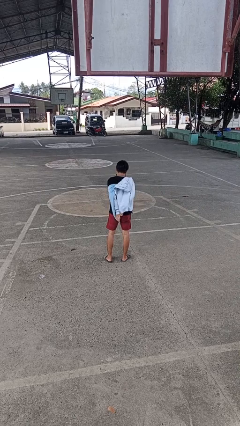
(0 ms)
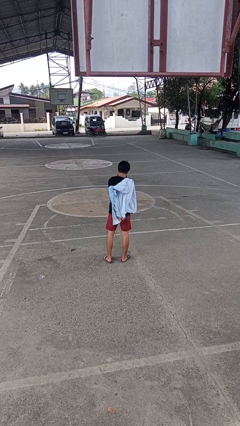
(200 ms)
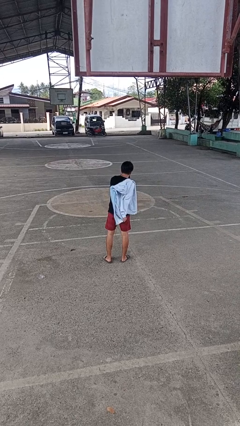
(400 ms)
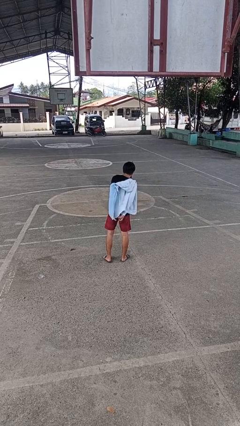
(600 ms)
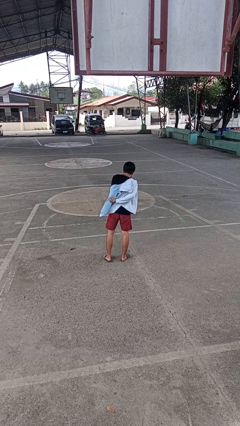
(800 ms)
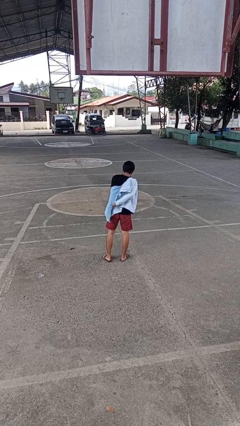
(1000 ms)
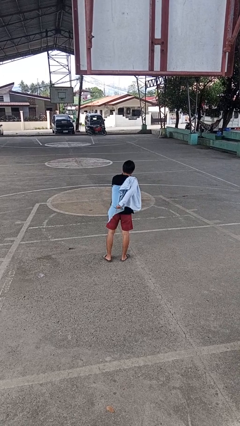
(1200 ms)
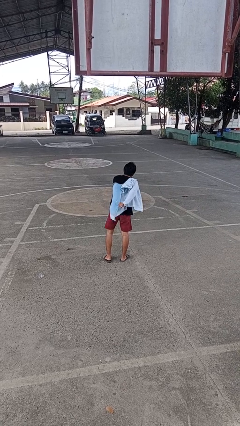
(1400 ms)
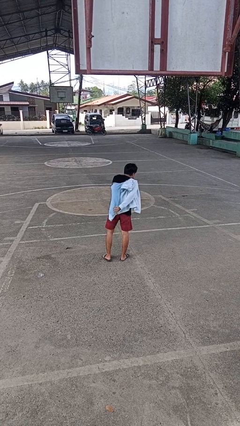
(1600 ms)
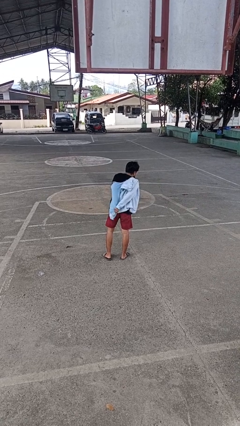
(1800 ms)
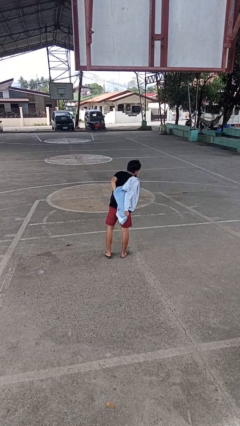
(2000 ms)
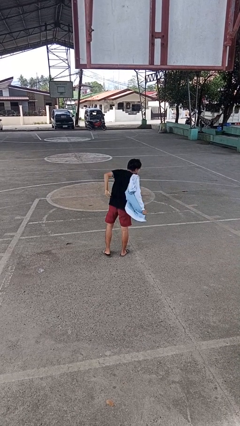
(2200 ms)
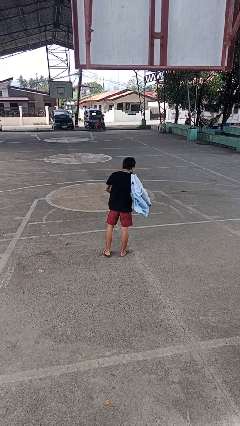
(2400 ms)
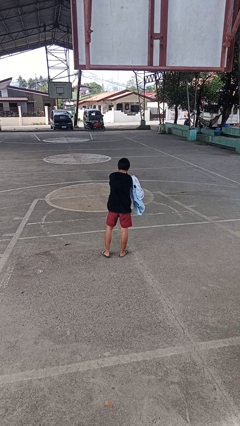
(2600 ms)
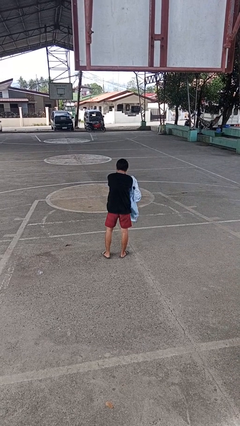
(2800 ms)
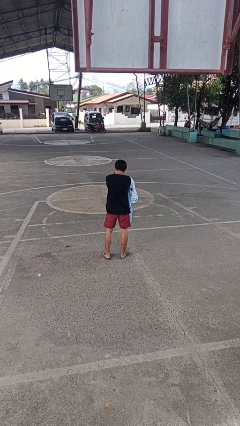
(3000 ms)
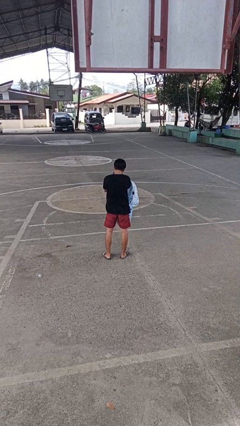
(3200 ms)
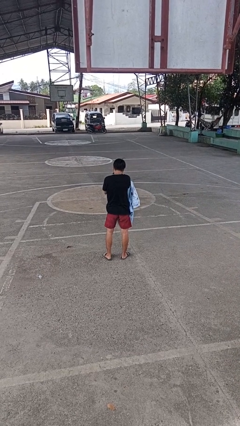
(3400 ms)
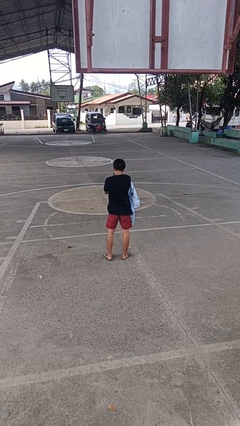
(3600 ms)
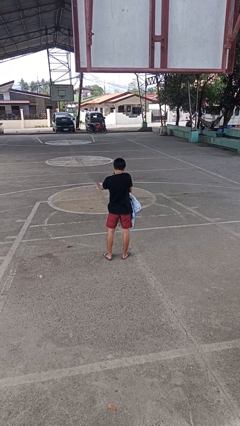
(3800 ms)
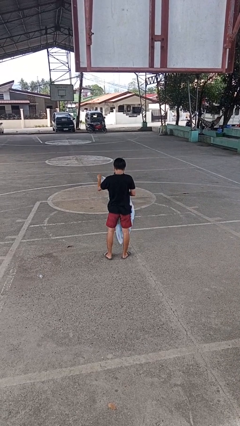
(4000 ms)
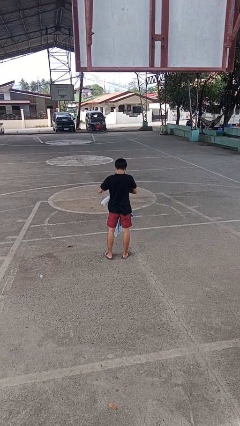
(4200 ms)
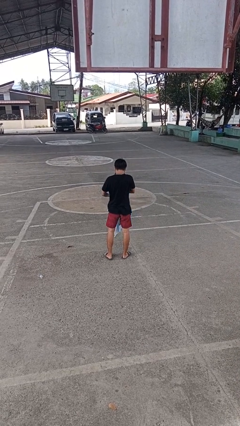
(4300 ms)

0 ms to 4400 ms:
person takes off jacket

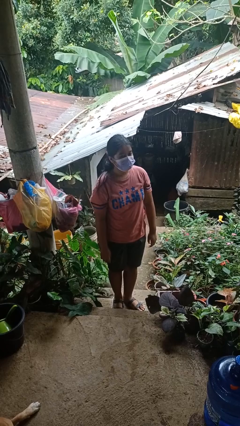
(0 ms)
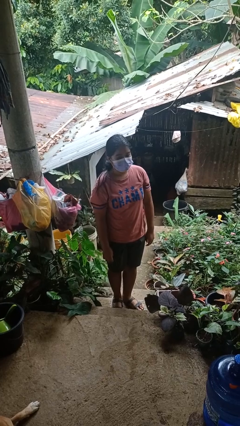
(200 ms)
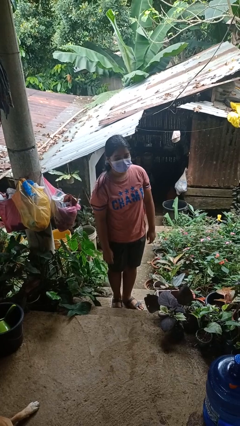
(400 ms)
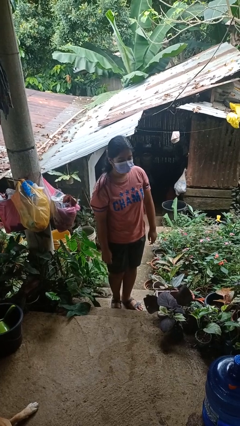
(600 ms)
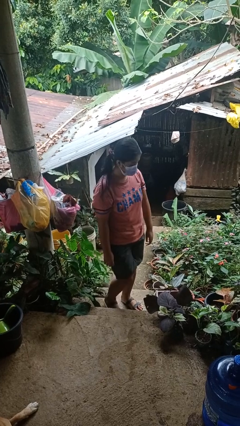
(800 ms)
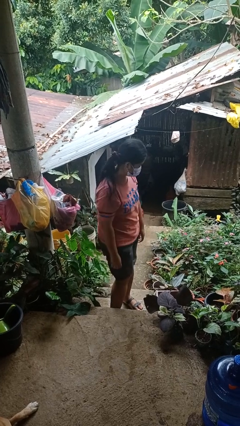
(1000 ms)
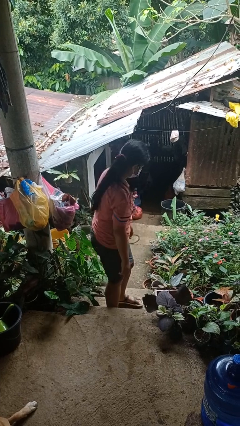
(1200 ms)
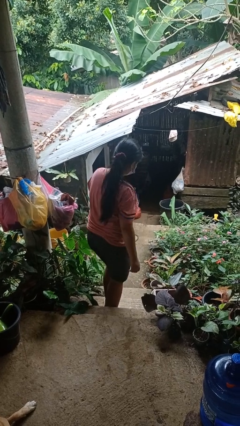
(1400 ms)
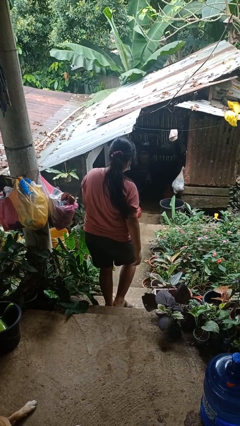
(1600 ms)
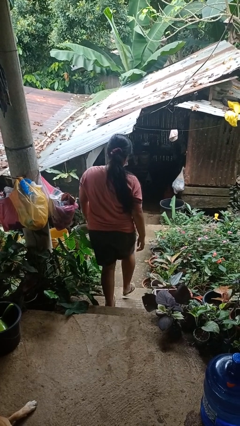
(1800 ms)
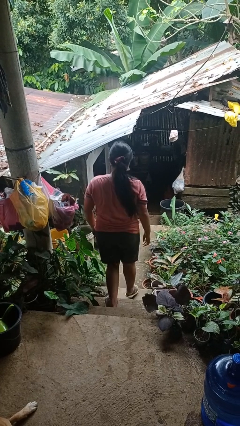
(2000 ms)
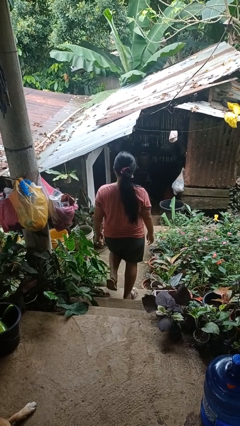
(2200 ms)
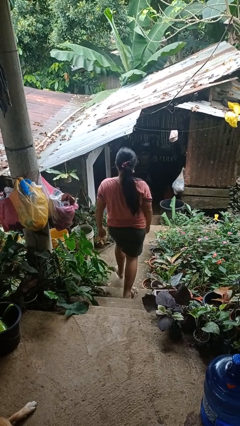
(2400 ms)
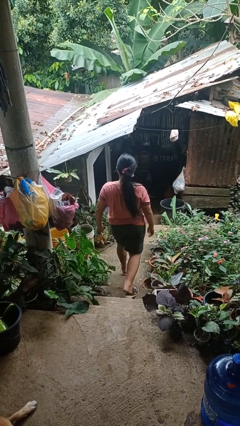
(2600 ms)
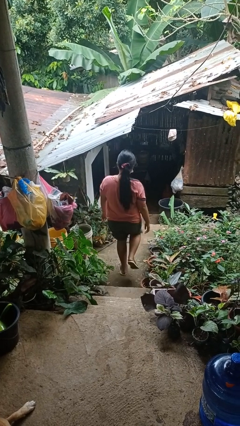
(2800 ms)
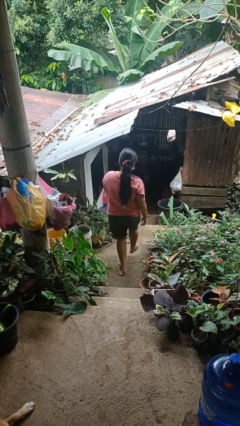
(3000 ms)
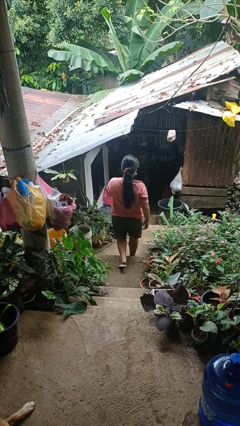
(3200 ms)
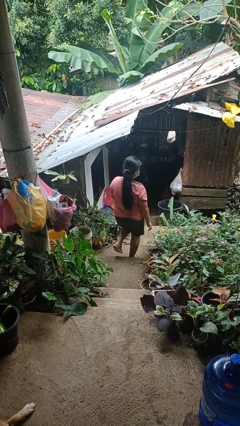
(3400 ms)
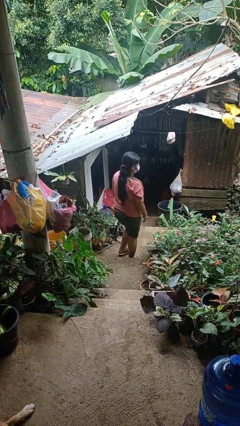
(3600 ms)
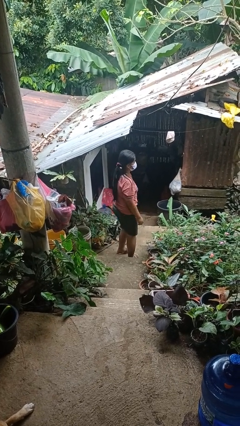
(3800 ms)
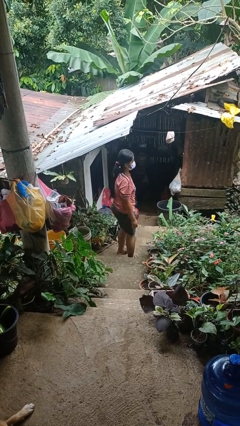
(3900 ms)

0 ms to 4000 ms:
person climbs down stairs

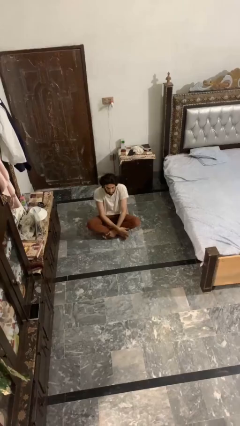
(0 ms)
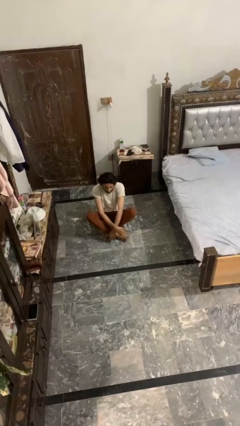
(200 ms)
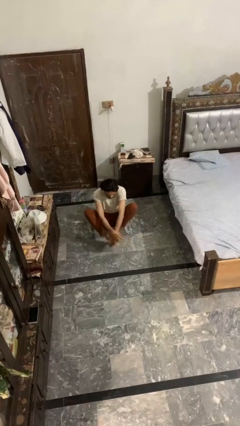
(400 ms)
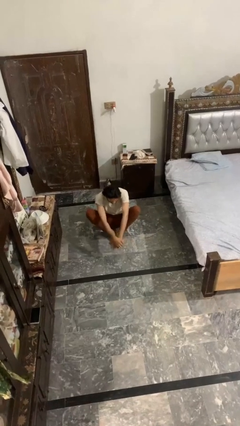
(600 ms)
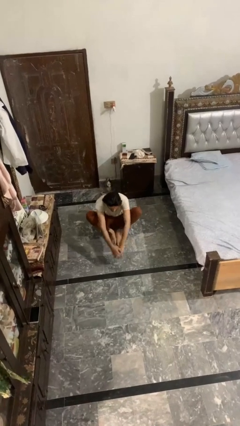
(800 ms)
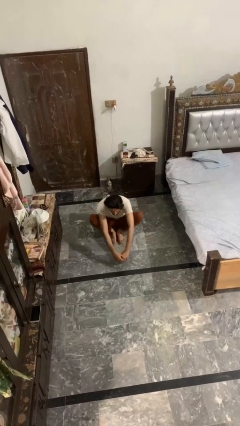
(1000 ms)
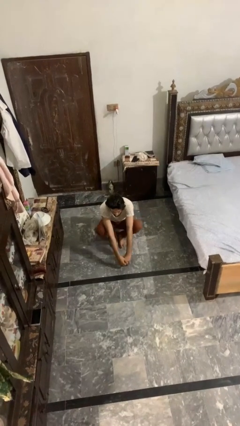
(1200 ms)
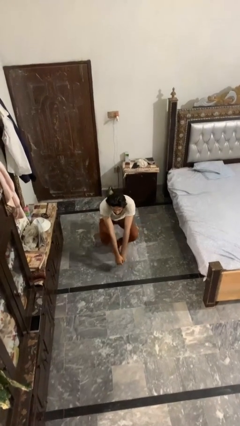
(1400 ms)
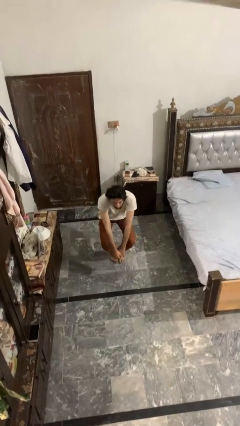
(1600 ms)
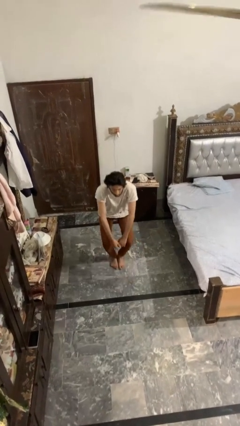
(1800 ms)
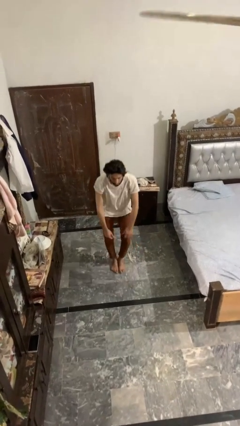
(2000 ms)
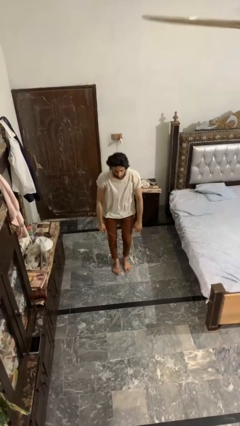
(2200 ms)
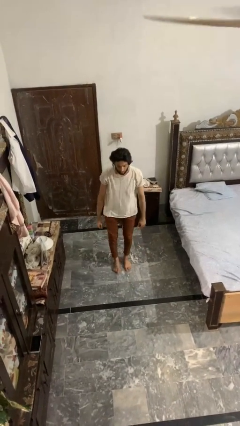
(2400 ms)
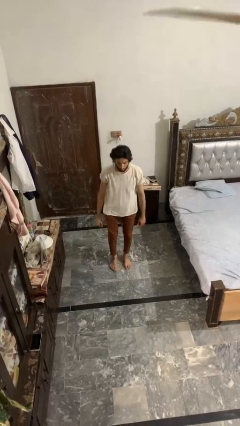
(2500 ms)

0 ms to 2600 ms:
person stands up from floor

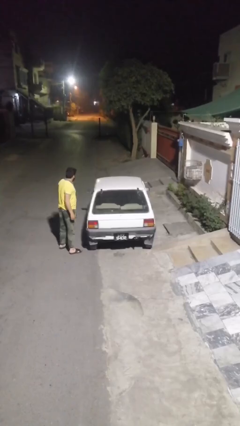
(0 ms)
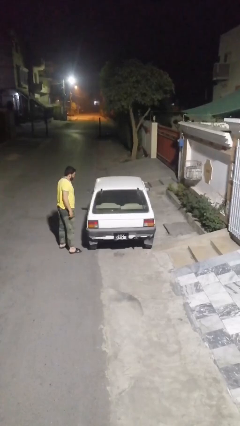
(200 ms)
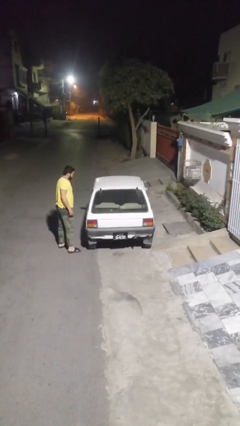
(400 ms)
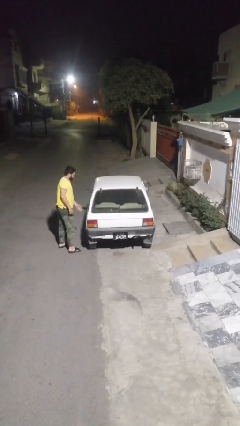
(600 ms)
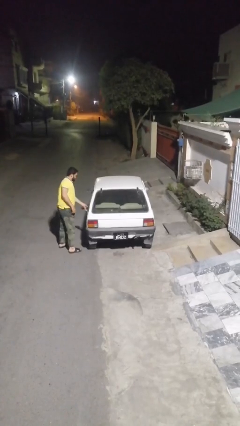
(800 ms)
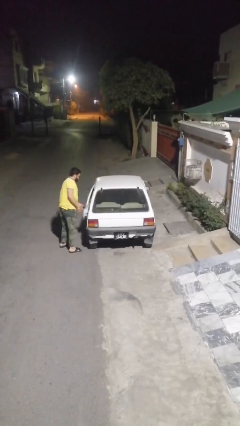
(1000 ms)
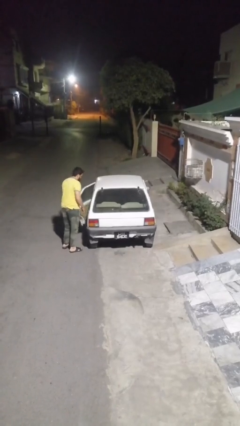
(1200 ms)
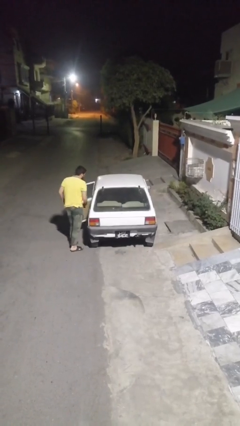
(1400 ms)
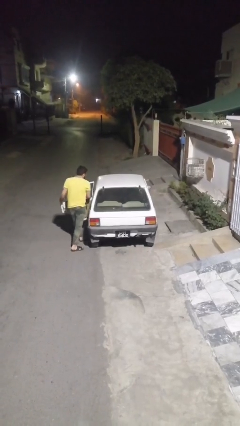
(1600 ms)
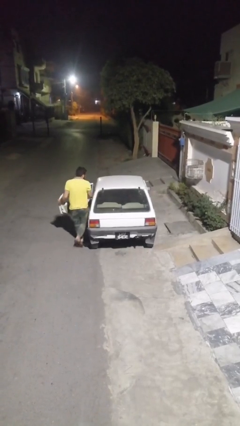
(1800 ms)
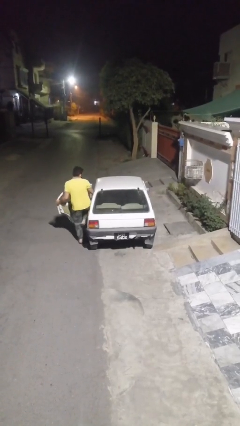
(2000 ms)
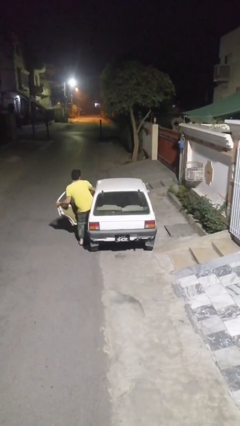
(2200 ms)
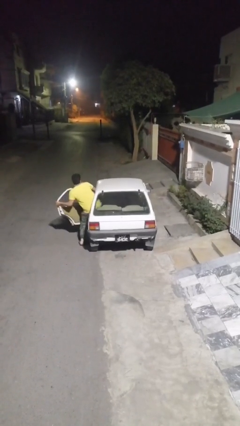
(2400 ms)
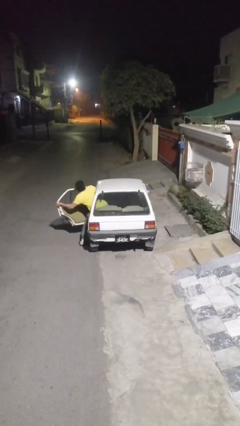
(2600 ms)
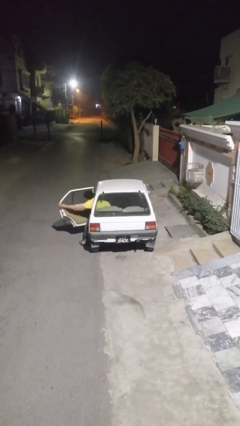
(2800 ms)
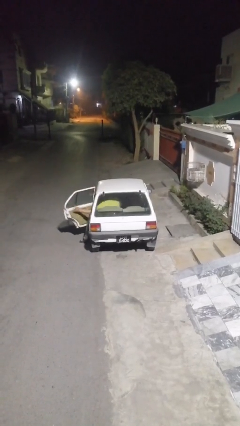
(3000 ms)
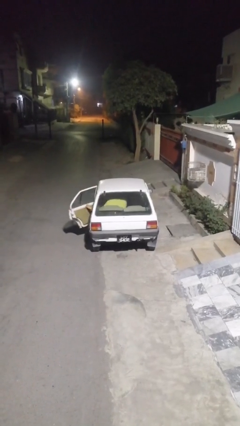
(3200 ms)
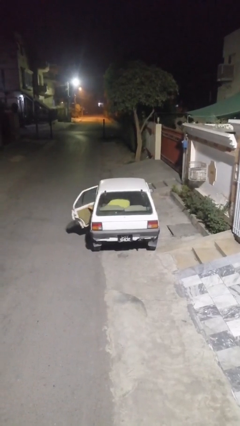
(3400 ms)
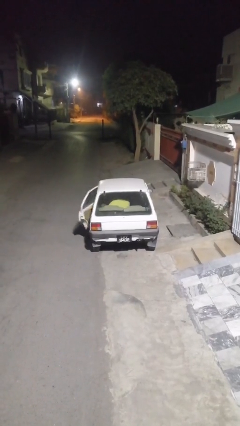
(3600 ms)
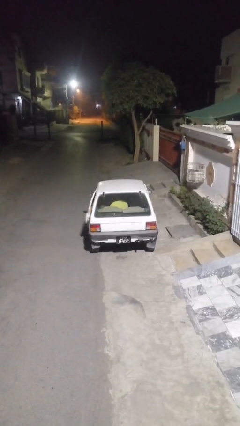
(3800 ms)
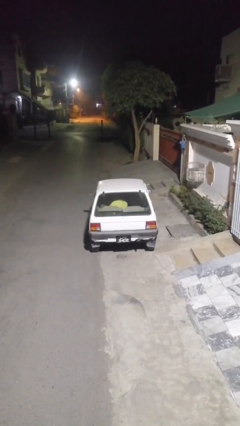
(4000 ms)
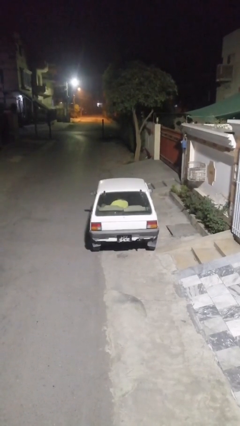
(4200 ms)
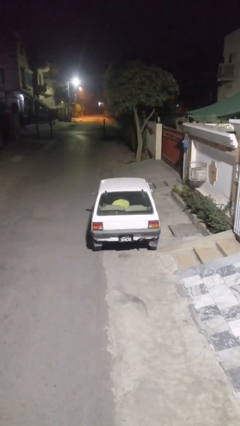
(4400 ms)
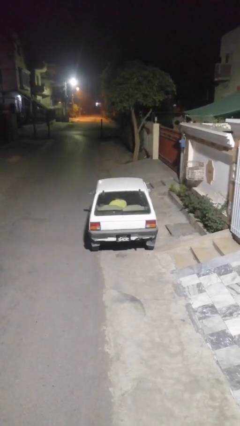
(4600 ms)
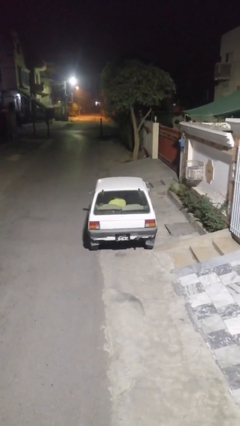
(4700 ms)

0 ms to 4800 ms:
car picks up person

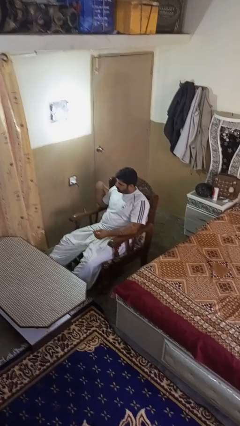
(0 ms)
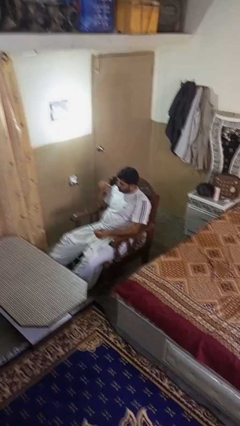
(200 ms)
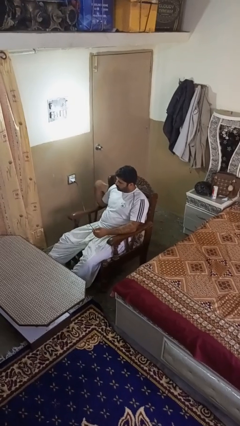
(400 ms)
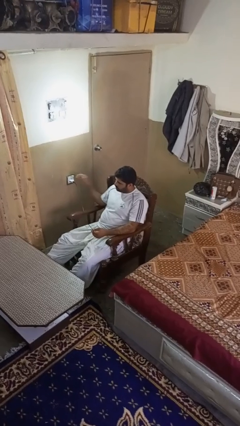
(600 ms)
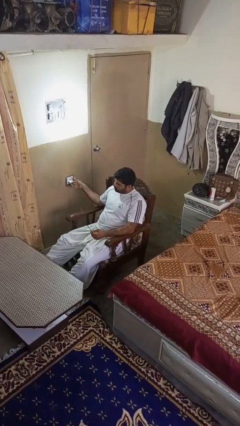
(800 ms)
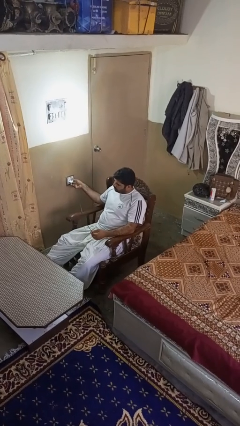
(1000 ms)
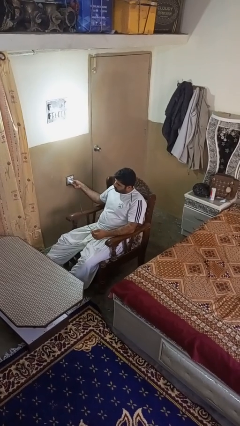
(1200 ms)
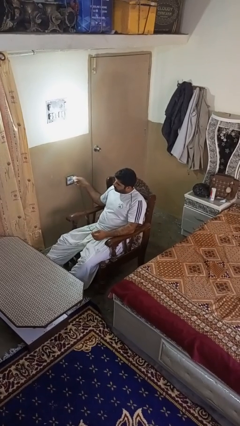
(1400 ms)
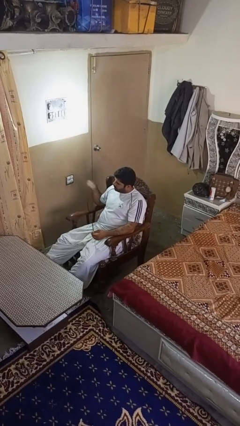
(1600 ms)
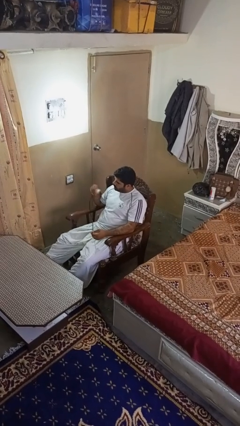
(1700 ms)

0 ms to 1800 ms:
person unplugs from electrical socket
